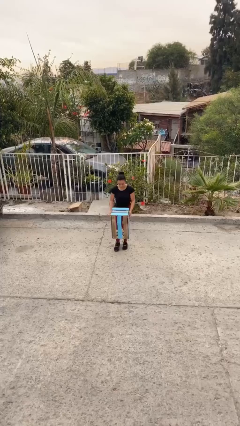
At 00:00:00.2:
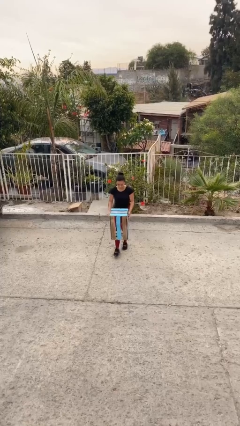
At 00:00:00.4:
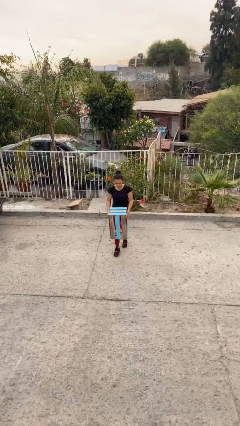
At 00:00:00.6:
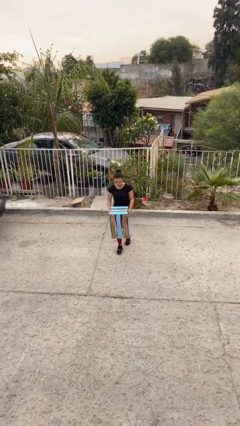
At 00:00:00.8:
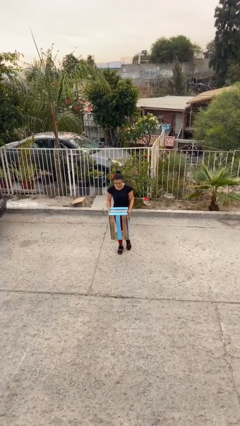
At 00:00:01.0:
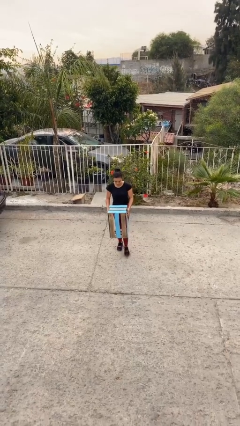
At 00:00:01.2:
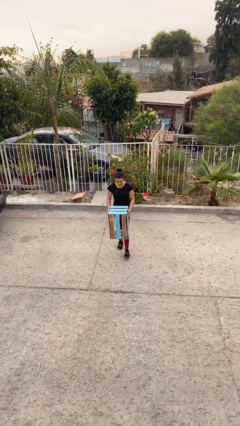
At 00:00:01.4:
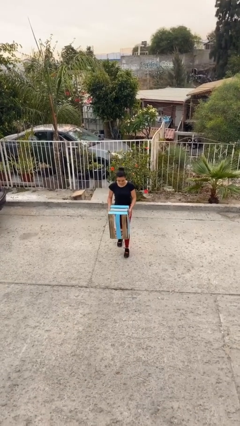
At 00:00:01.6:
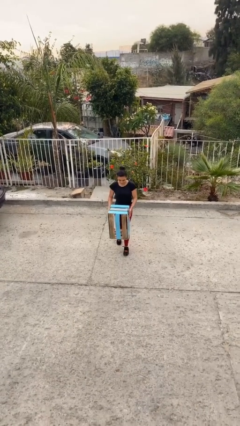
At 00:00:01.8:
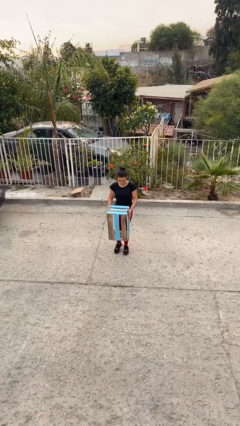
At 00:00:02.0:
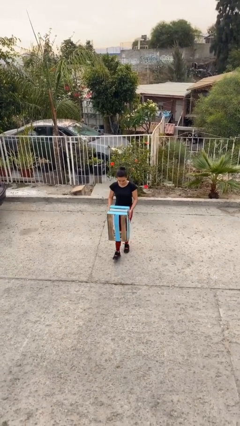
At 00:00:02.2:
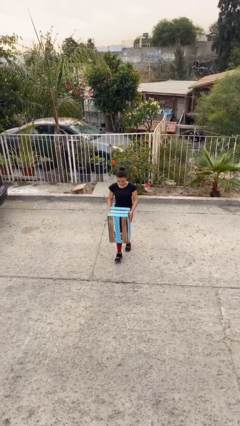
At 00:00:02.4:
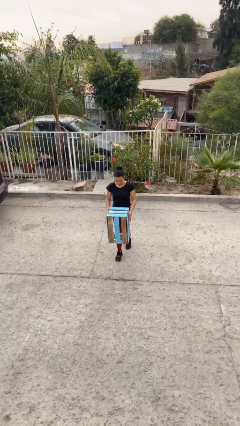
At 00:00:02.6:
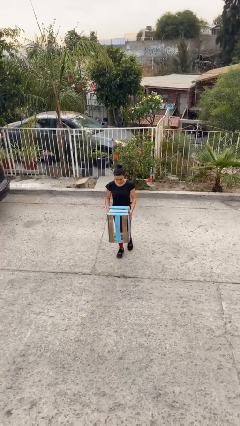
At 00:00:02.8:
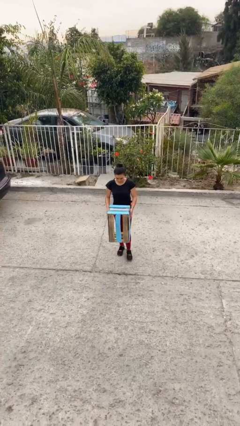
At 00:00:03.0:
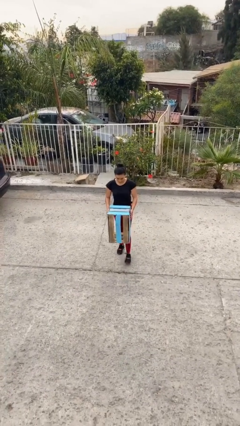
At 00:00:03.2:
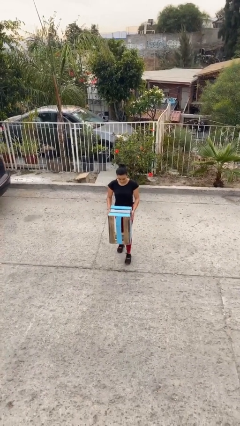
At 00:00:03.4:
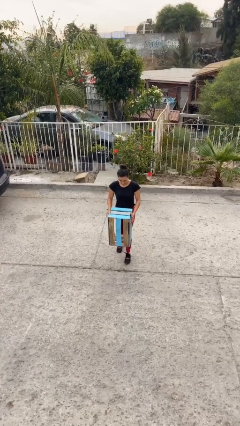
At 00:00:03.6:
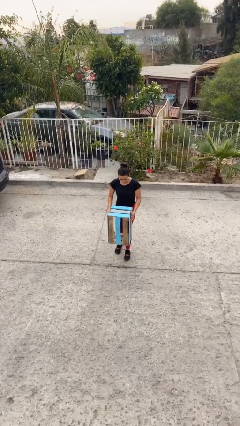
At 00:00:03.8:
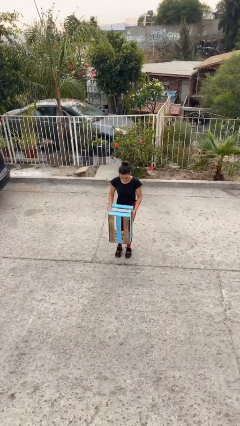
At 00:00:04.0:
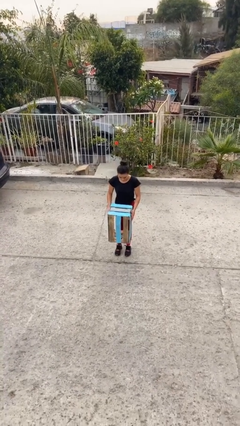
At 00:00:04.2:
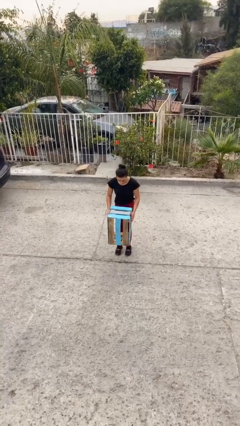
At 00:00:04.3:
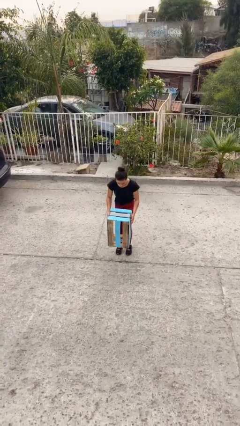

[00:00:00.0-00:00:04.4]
person carries heavy object

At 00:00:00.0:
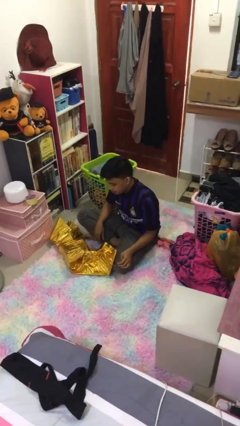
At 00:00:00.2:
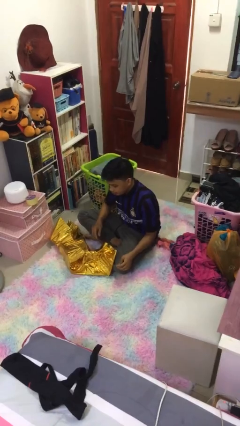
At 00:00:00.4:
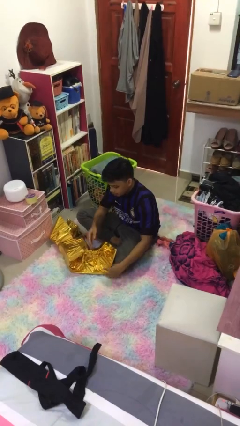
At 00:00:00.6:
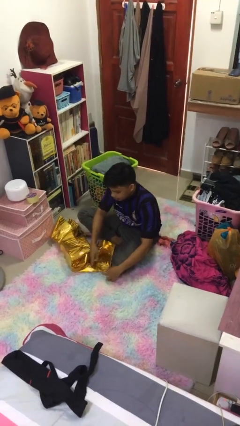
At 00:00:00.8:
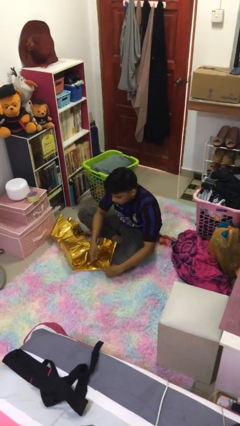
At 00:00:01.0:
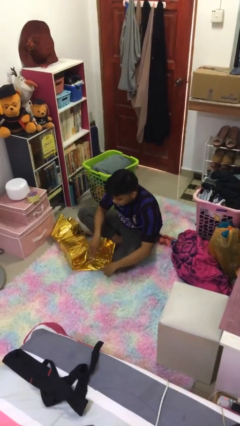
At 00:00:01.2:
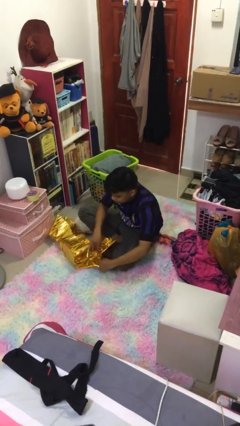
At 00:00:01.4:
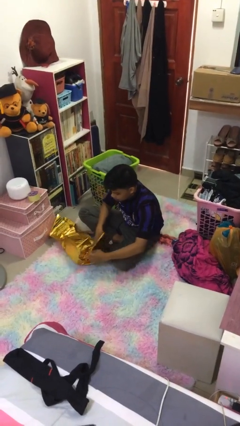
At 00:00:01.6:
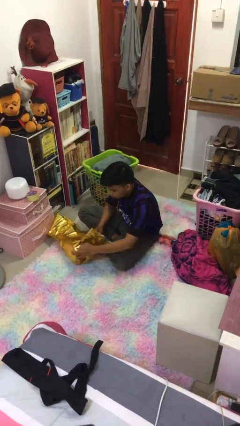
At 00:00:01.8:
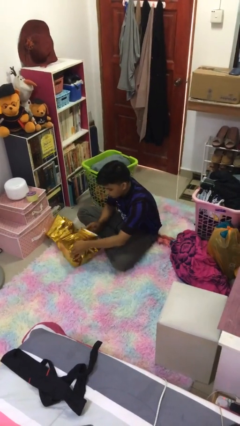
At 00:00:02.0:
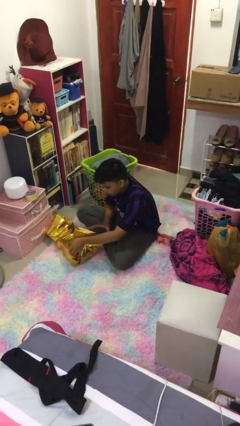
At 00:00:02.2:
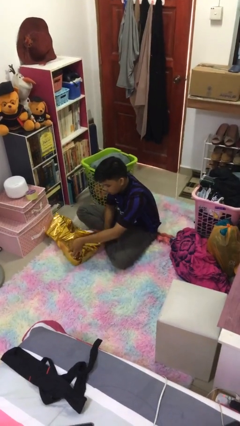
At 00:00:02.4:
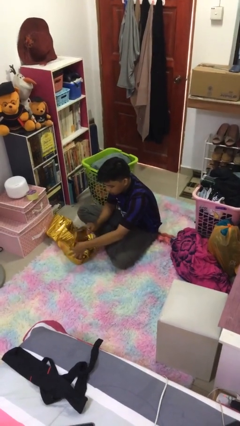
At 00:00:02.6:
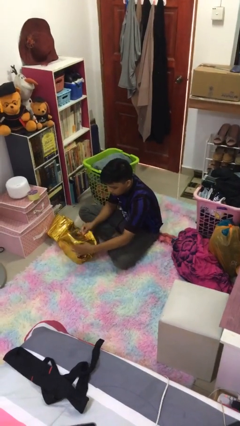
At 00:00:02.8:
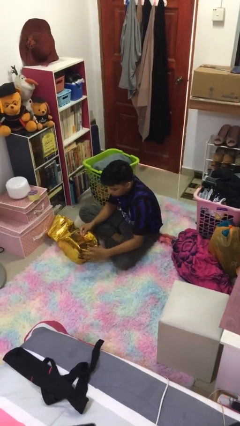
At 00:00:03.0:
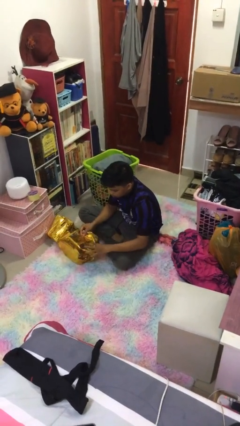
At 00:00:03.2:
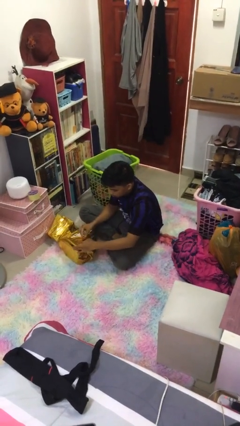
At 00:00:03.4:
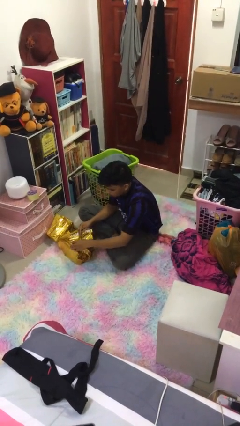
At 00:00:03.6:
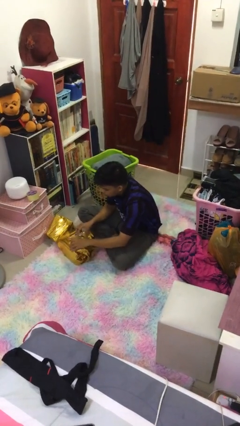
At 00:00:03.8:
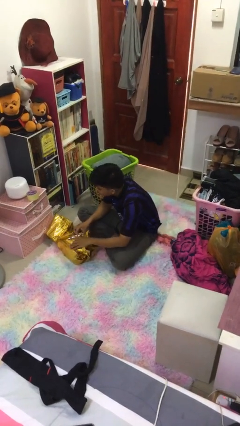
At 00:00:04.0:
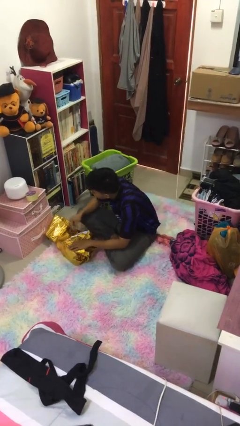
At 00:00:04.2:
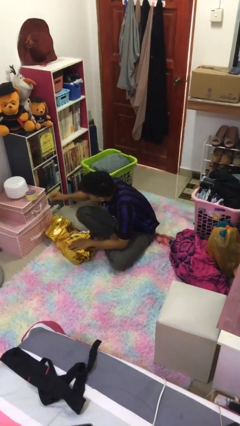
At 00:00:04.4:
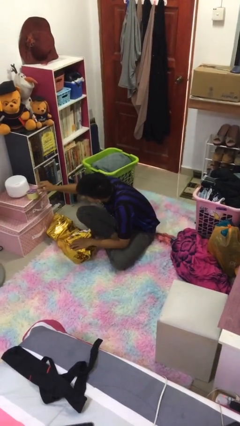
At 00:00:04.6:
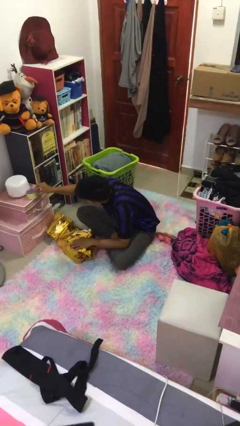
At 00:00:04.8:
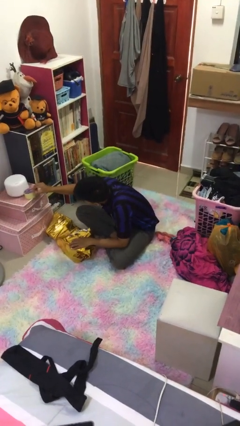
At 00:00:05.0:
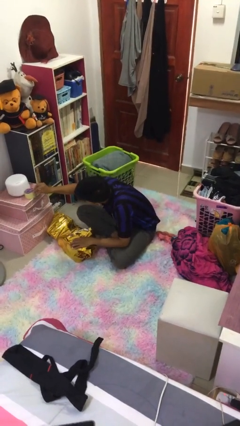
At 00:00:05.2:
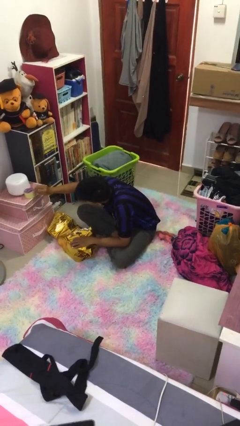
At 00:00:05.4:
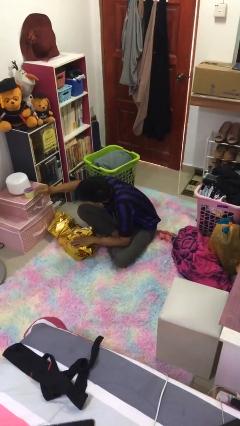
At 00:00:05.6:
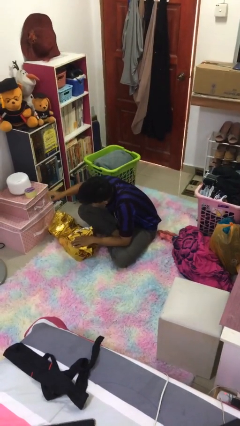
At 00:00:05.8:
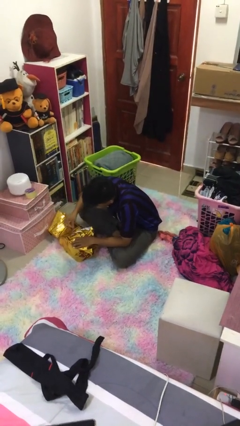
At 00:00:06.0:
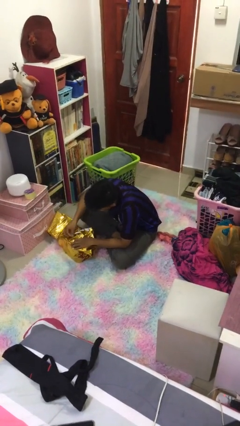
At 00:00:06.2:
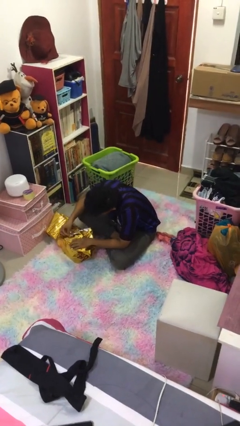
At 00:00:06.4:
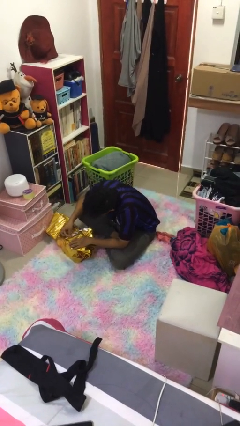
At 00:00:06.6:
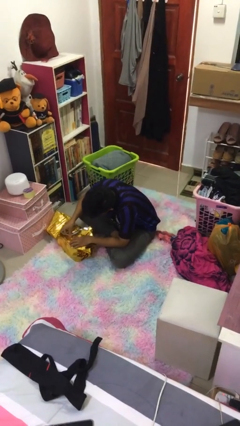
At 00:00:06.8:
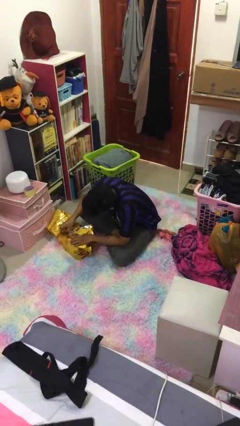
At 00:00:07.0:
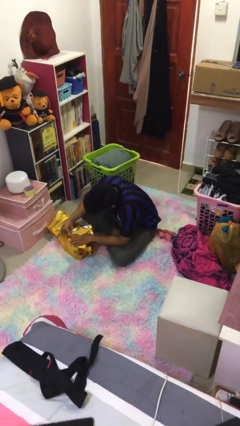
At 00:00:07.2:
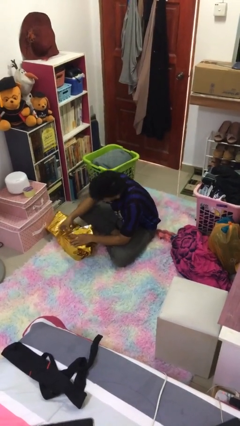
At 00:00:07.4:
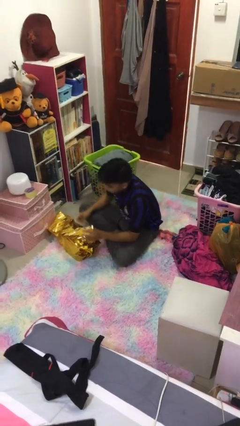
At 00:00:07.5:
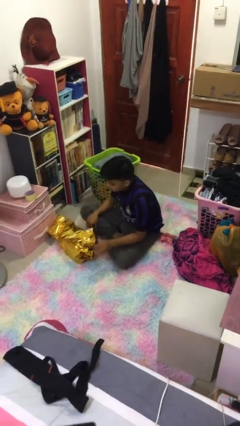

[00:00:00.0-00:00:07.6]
person wraps box

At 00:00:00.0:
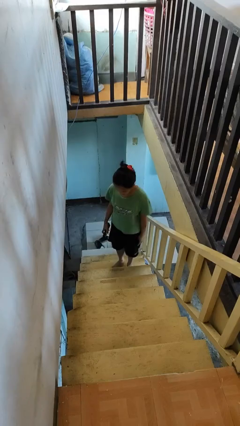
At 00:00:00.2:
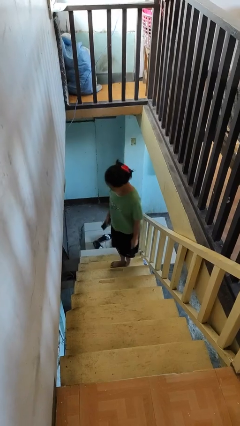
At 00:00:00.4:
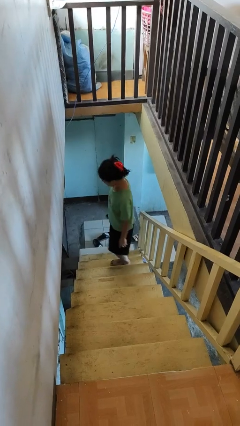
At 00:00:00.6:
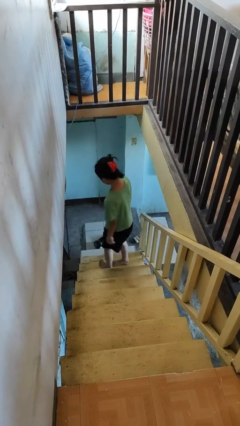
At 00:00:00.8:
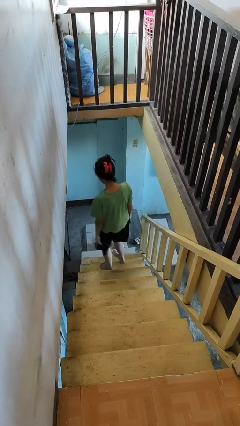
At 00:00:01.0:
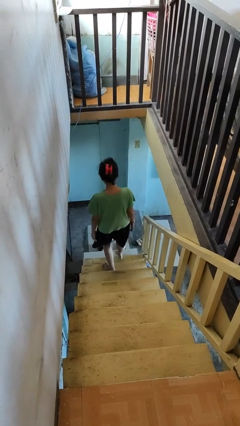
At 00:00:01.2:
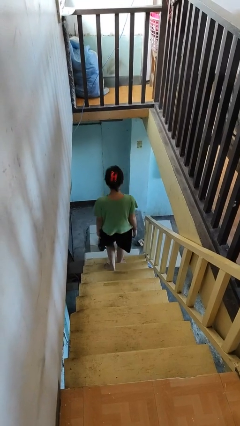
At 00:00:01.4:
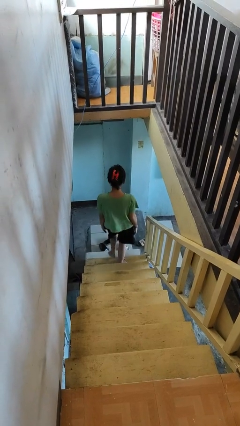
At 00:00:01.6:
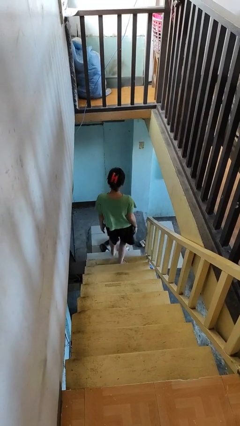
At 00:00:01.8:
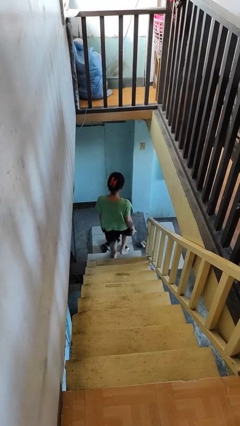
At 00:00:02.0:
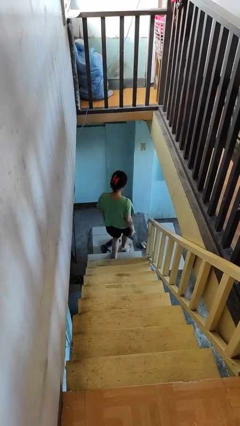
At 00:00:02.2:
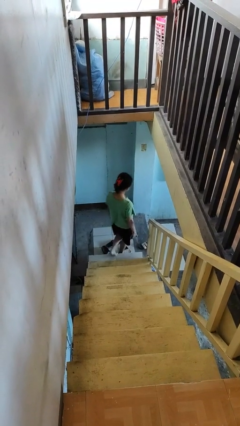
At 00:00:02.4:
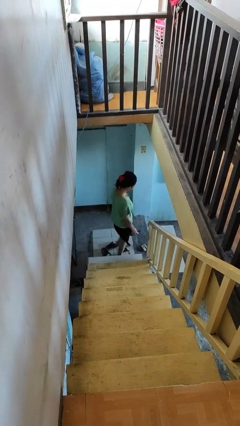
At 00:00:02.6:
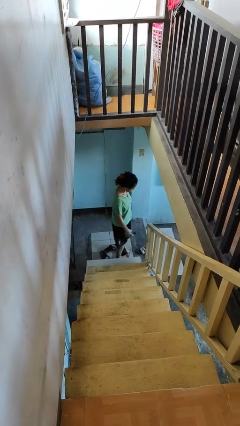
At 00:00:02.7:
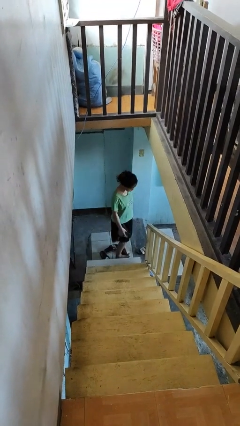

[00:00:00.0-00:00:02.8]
person climbs down stairs

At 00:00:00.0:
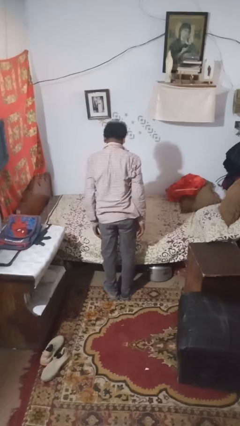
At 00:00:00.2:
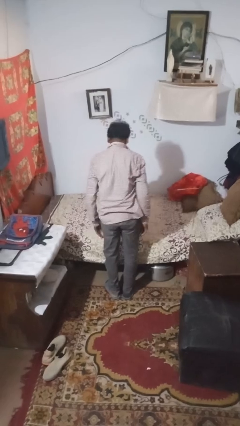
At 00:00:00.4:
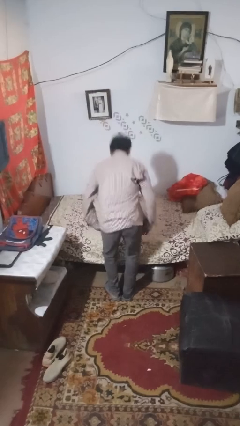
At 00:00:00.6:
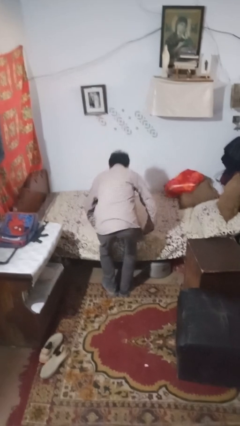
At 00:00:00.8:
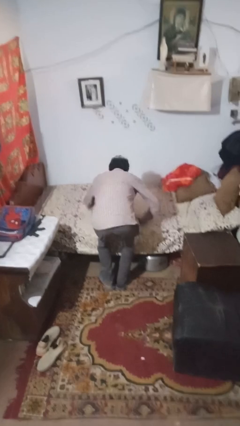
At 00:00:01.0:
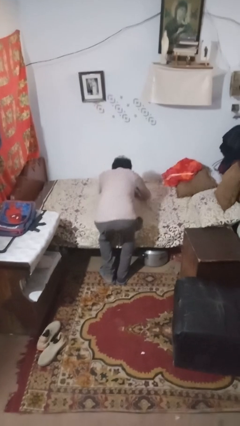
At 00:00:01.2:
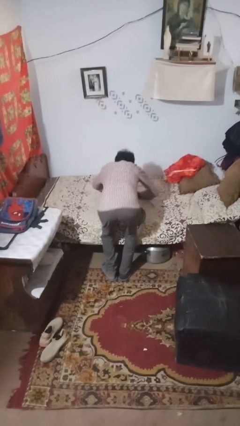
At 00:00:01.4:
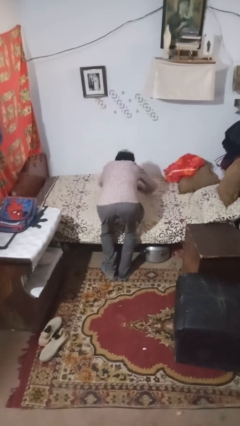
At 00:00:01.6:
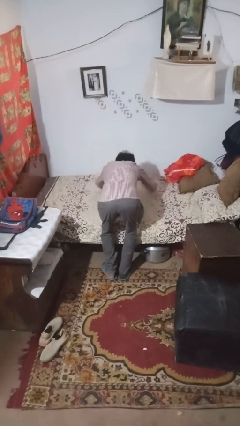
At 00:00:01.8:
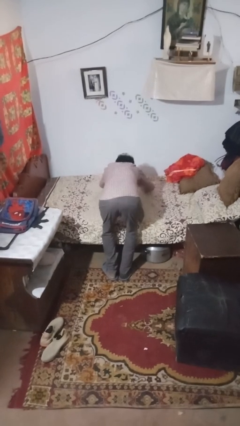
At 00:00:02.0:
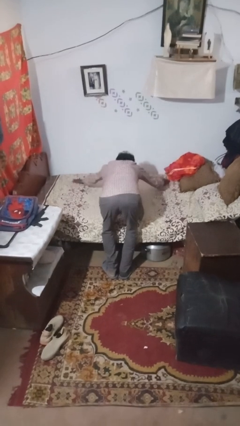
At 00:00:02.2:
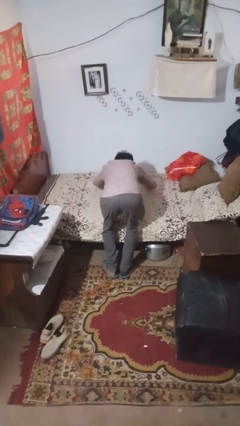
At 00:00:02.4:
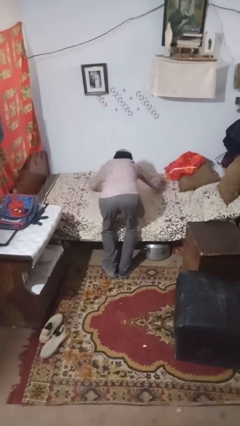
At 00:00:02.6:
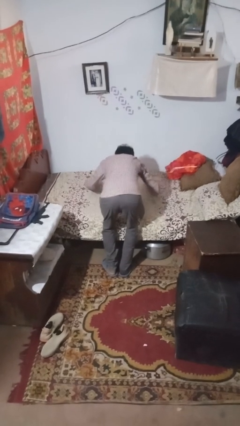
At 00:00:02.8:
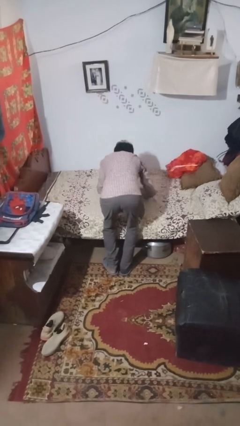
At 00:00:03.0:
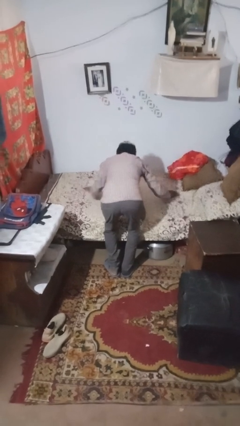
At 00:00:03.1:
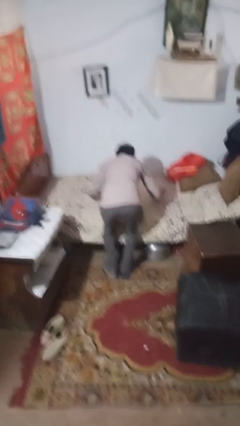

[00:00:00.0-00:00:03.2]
person makes bed
